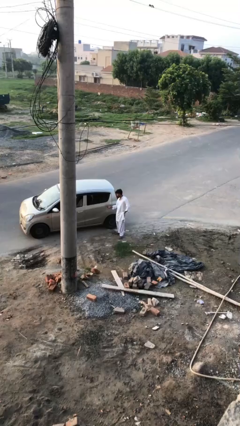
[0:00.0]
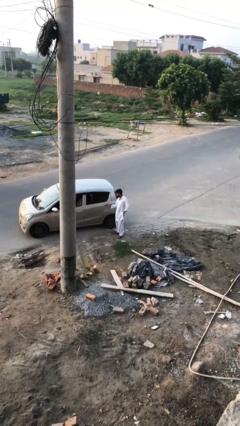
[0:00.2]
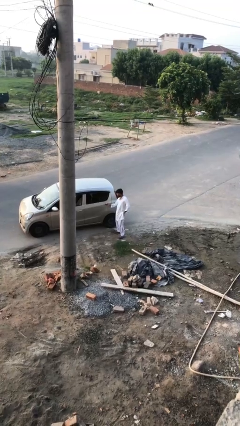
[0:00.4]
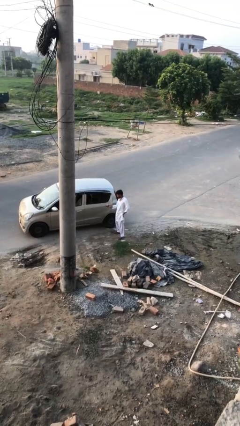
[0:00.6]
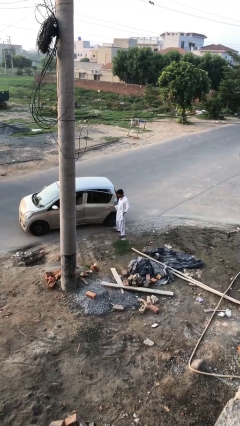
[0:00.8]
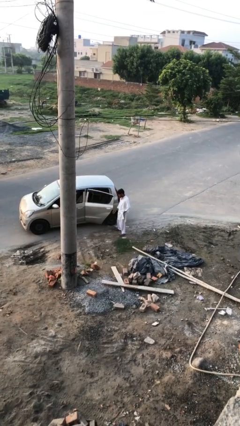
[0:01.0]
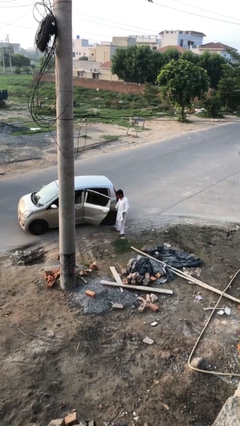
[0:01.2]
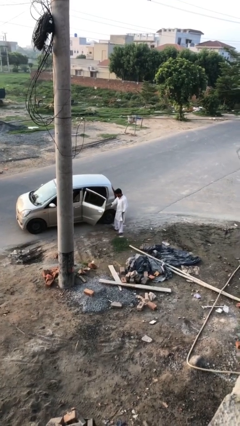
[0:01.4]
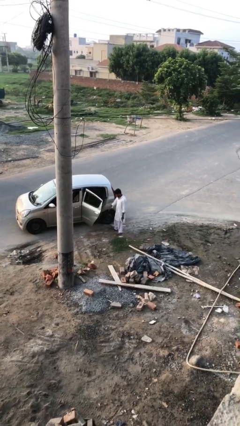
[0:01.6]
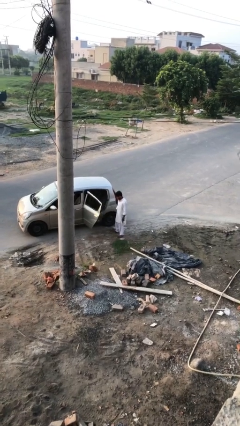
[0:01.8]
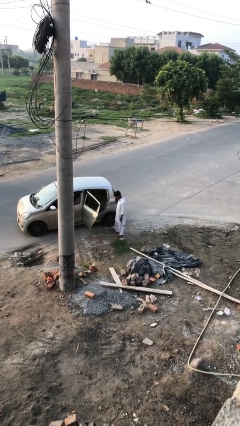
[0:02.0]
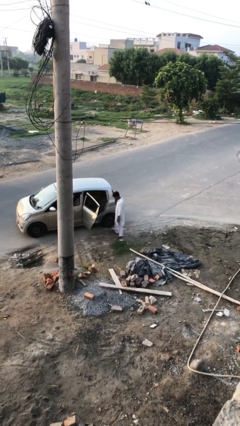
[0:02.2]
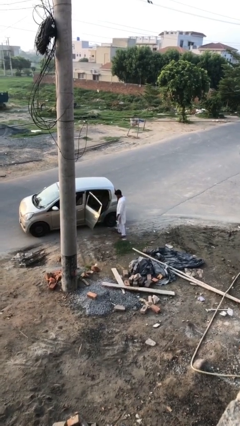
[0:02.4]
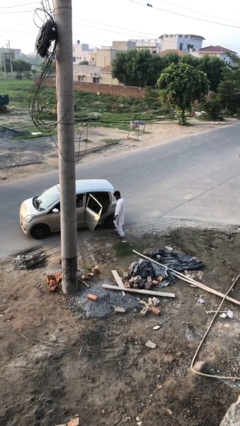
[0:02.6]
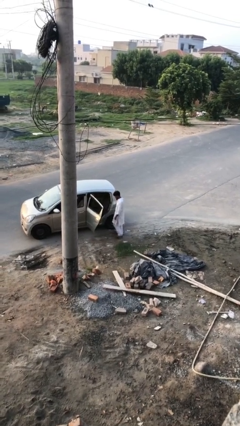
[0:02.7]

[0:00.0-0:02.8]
person opens car door

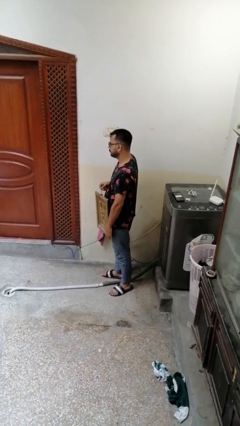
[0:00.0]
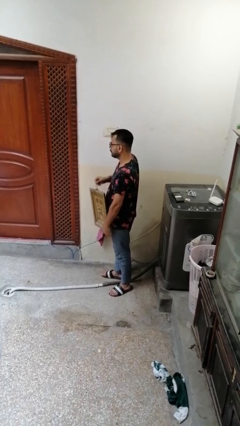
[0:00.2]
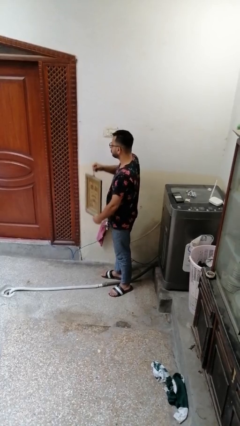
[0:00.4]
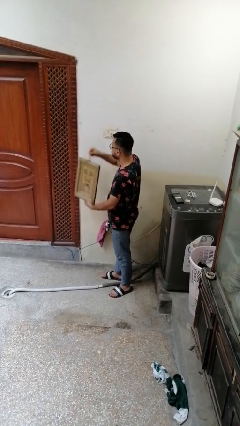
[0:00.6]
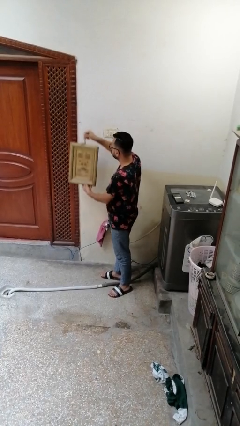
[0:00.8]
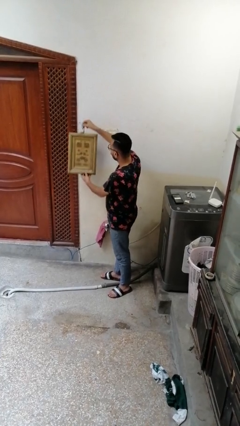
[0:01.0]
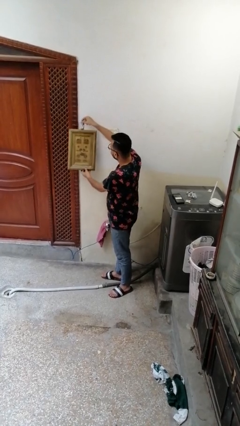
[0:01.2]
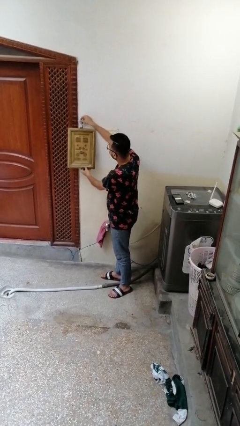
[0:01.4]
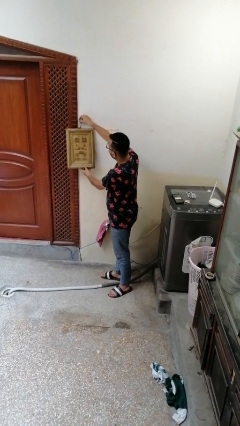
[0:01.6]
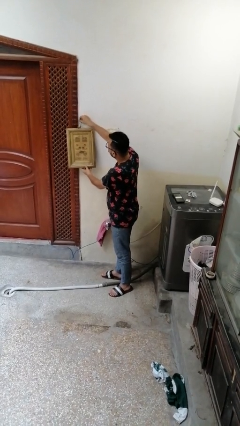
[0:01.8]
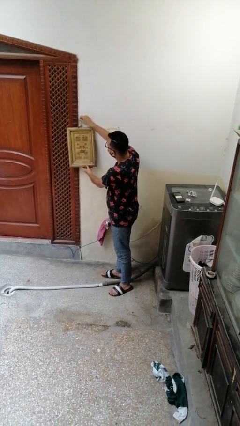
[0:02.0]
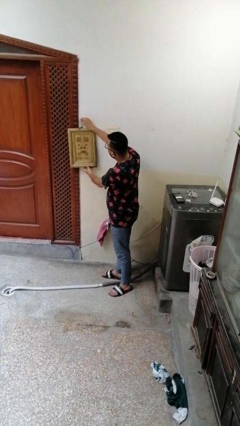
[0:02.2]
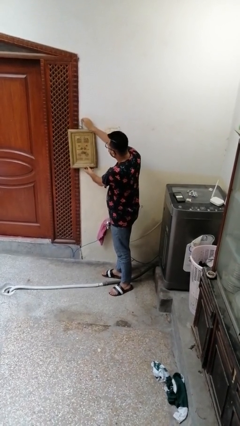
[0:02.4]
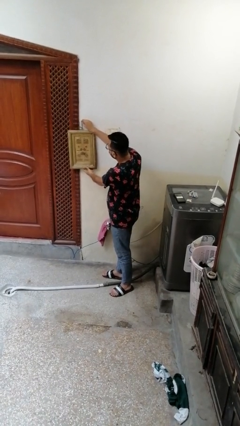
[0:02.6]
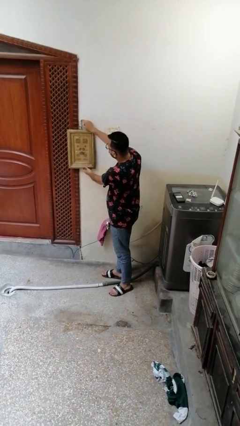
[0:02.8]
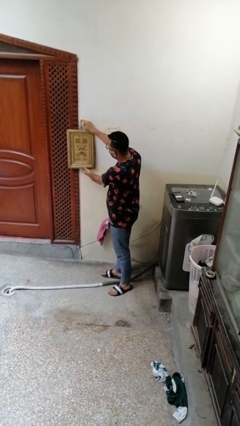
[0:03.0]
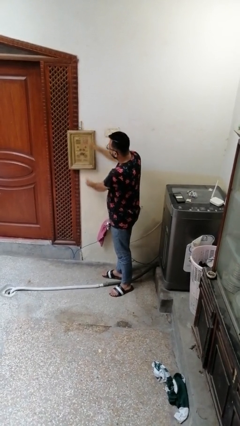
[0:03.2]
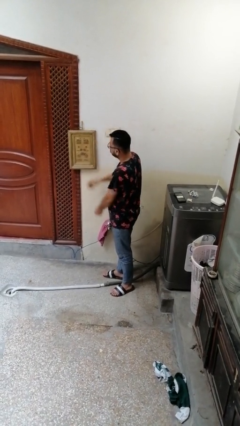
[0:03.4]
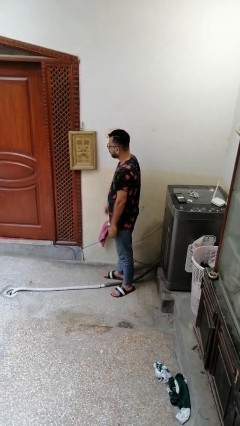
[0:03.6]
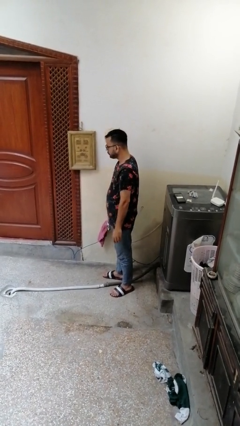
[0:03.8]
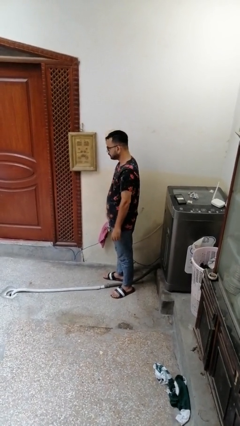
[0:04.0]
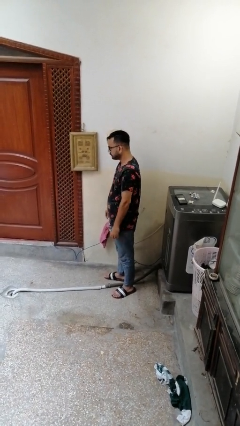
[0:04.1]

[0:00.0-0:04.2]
person puts up picture frame

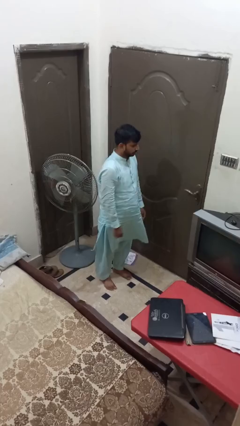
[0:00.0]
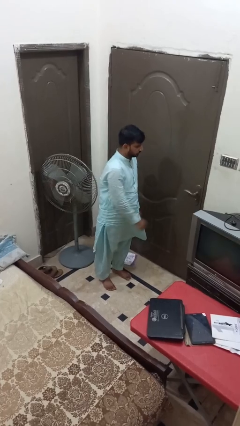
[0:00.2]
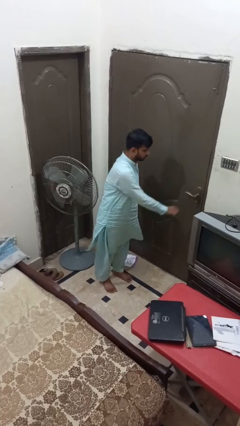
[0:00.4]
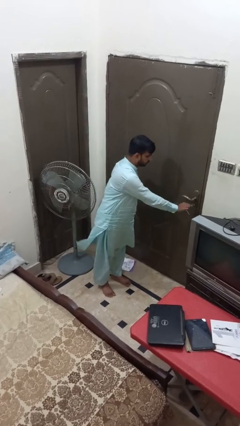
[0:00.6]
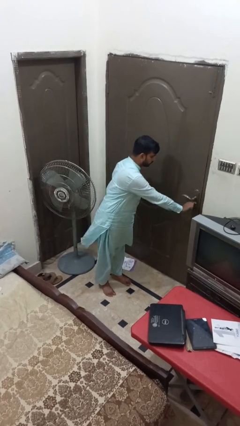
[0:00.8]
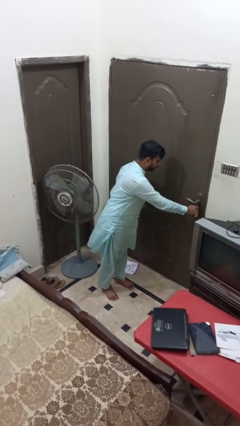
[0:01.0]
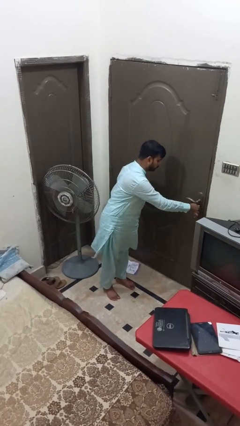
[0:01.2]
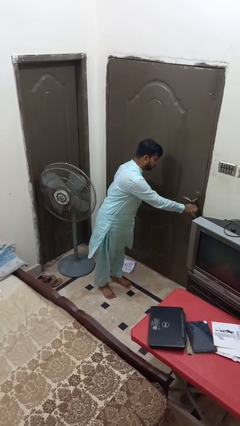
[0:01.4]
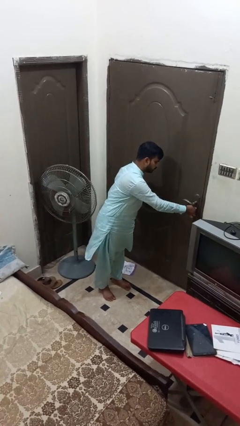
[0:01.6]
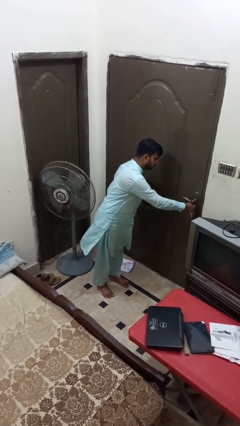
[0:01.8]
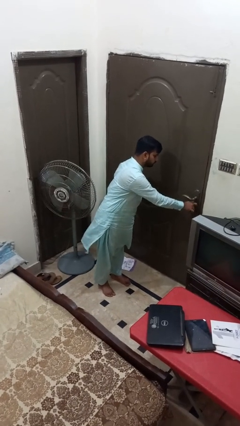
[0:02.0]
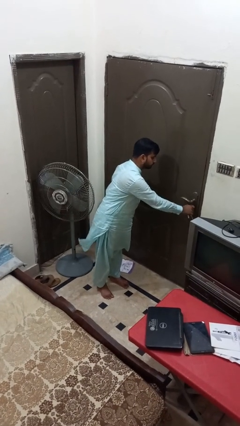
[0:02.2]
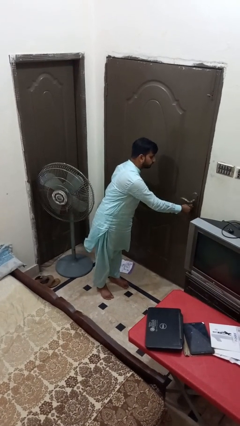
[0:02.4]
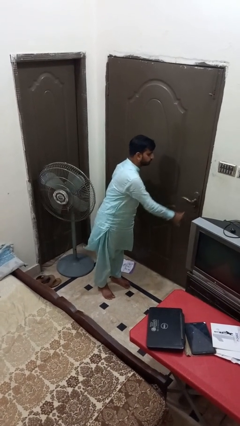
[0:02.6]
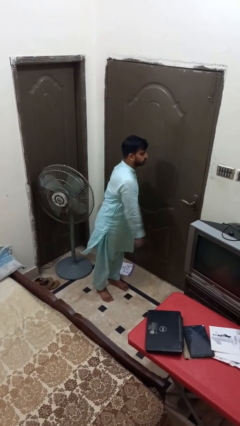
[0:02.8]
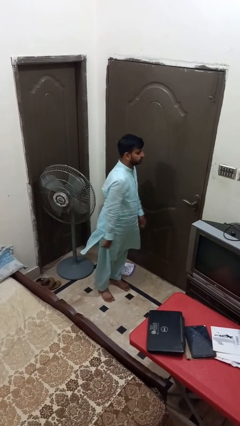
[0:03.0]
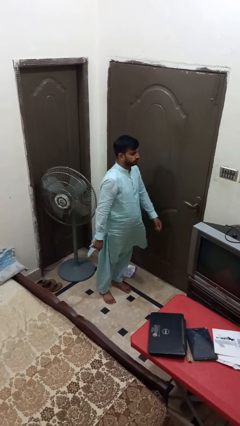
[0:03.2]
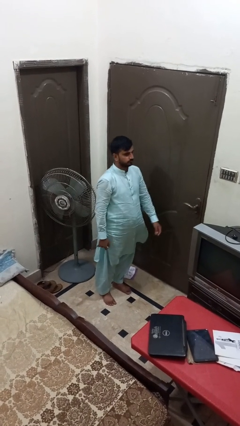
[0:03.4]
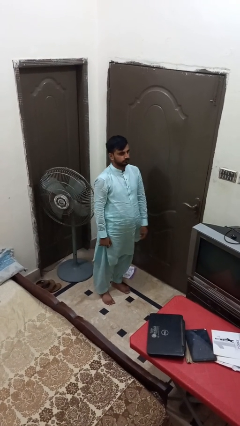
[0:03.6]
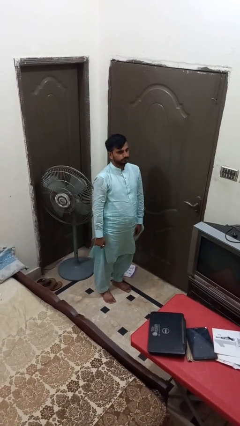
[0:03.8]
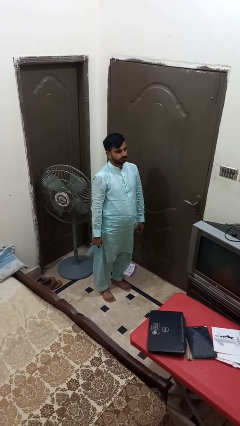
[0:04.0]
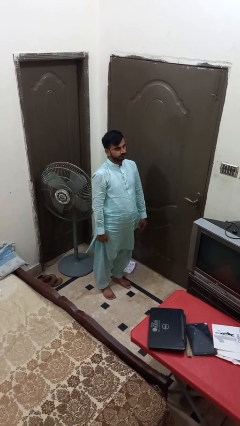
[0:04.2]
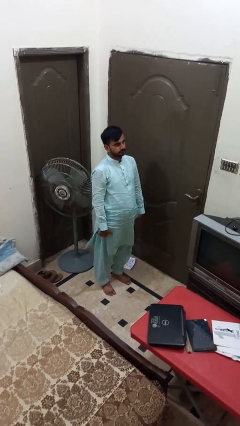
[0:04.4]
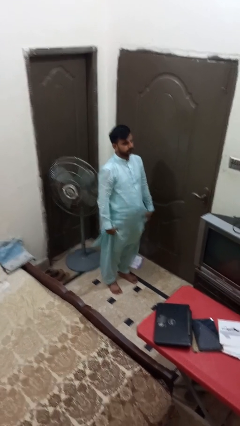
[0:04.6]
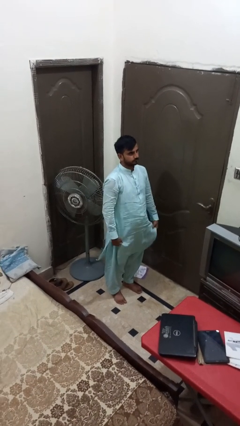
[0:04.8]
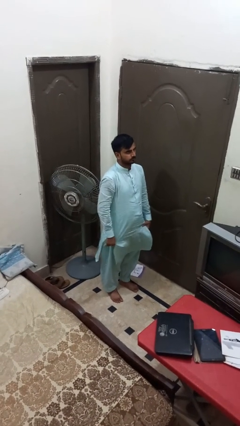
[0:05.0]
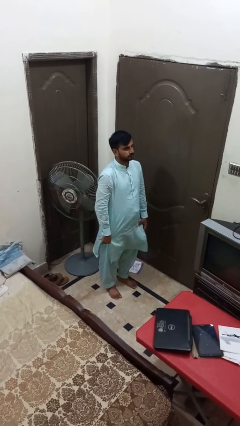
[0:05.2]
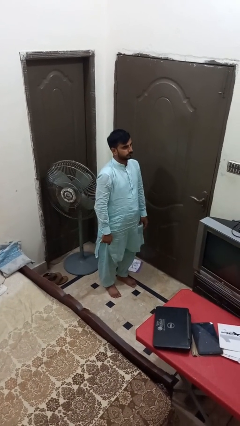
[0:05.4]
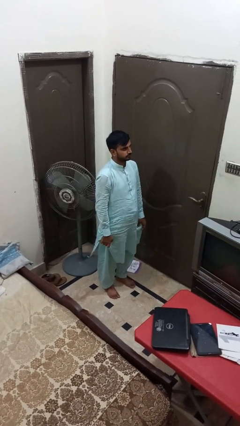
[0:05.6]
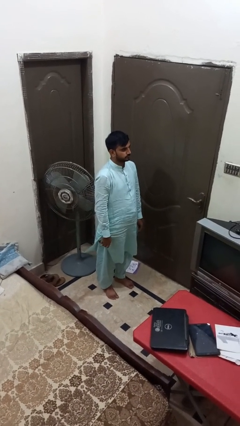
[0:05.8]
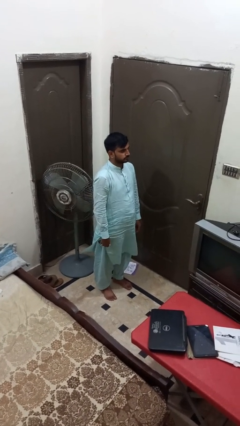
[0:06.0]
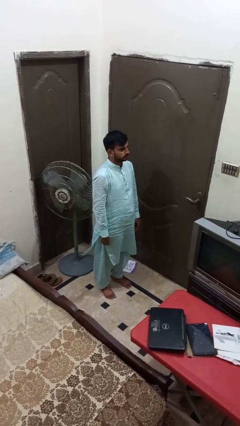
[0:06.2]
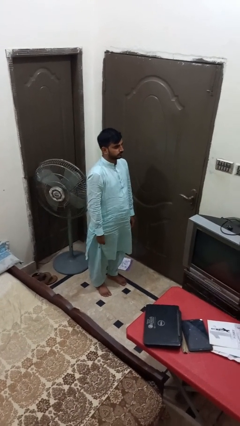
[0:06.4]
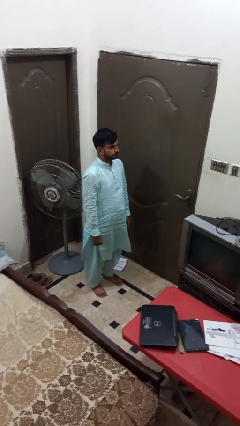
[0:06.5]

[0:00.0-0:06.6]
person locks door with keys

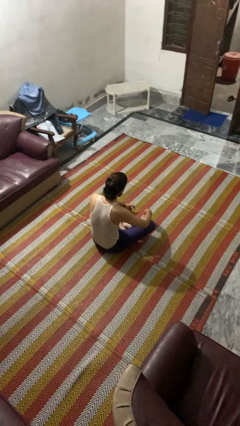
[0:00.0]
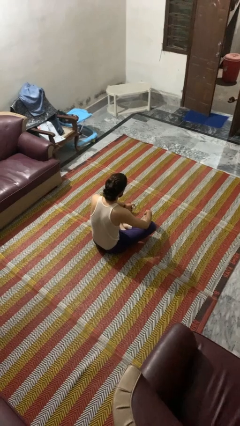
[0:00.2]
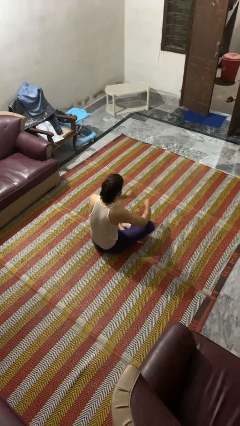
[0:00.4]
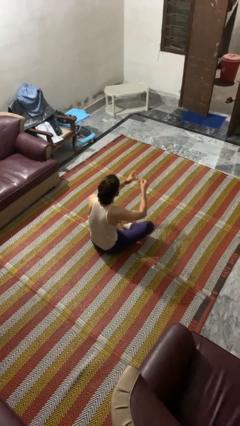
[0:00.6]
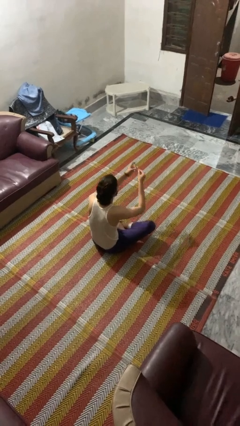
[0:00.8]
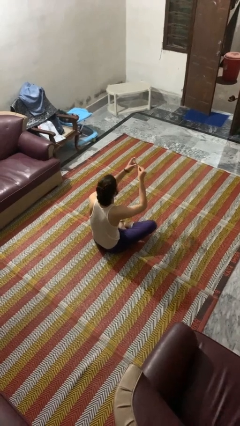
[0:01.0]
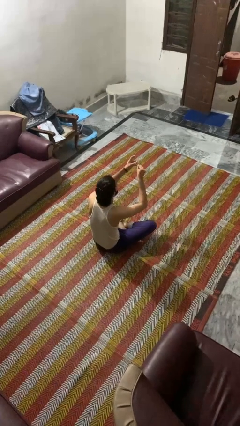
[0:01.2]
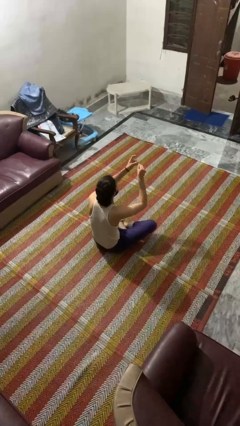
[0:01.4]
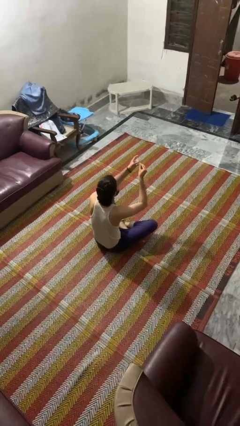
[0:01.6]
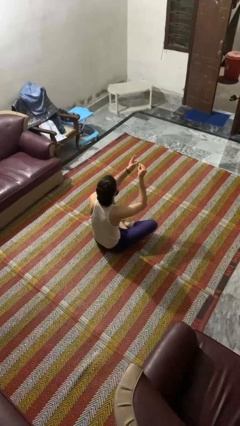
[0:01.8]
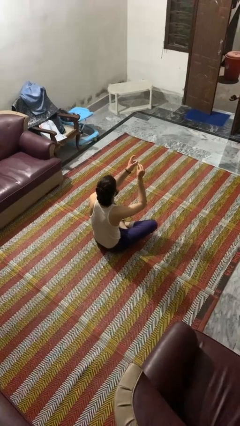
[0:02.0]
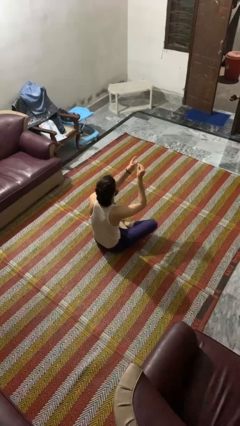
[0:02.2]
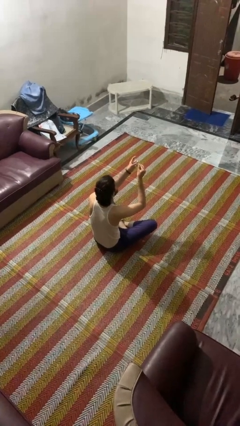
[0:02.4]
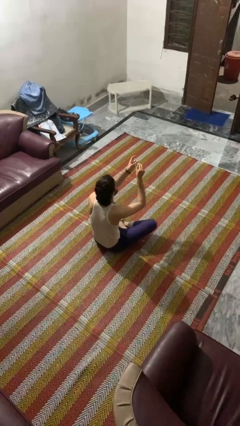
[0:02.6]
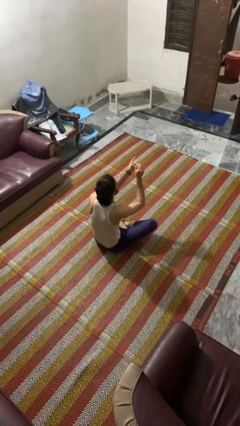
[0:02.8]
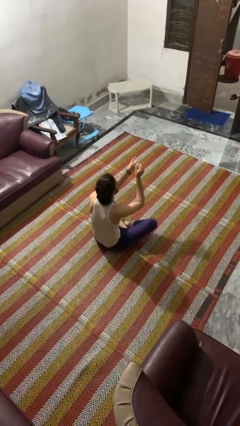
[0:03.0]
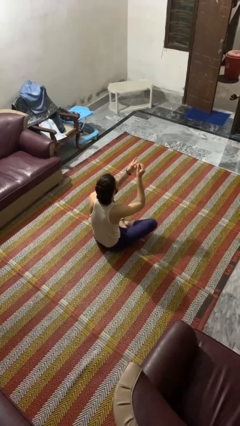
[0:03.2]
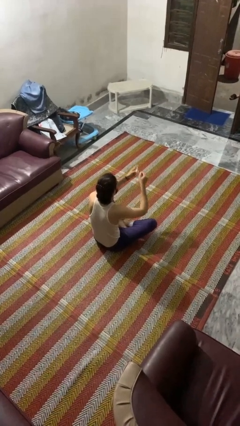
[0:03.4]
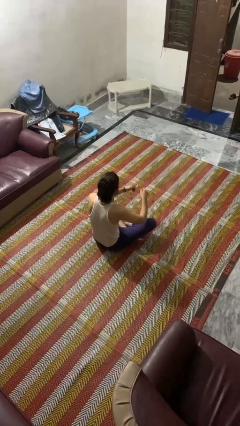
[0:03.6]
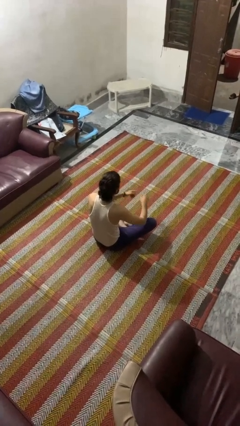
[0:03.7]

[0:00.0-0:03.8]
person clips fingernails
